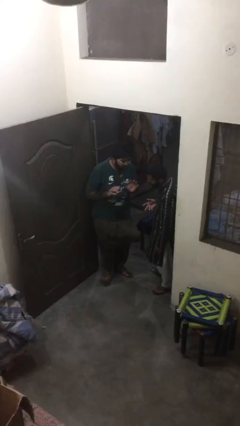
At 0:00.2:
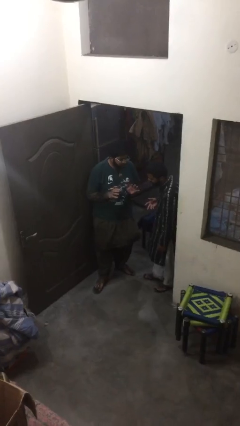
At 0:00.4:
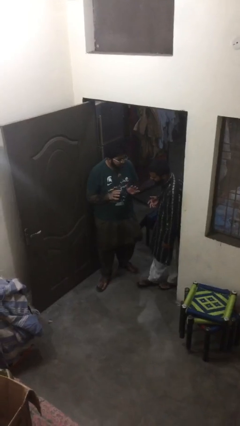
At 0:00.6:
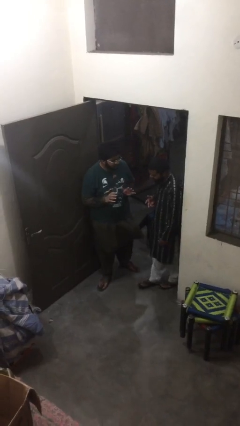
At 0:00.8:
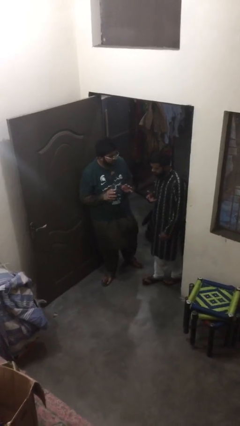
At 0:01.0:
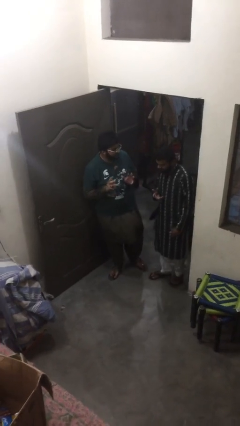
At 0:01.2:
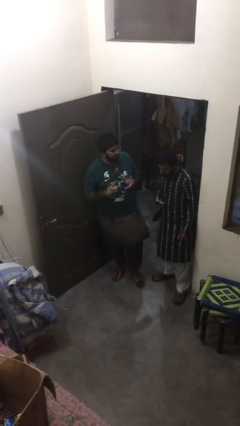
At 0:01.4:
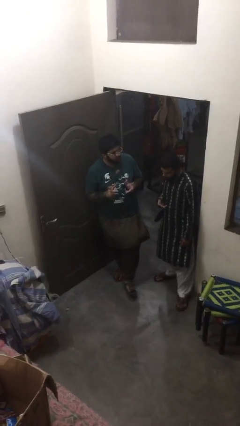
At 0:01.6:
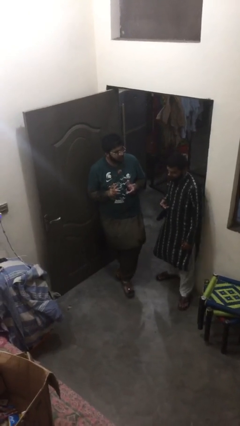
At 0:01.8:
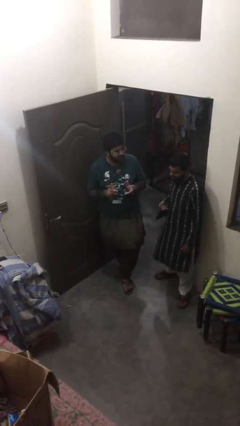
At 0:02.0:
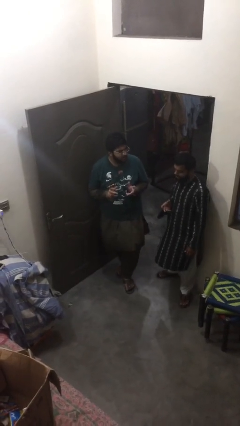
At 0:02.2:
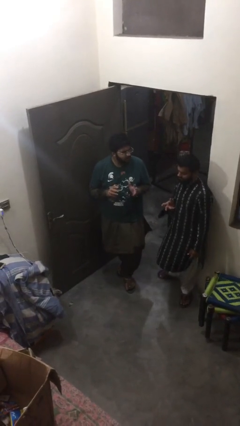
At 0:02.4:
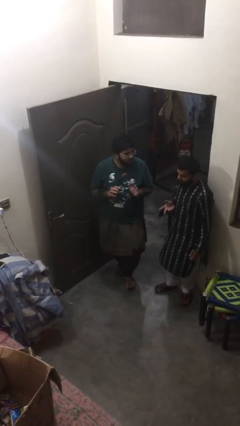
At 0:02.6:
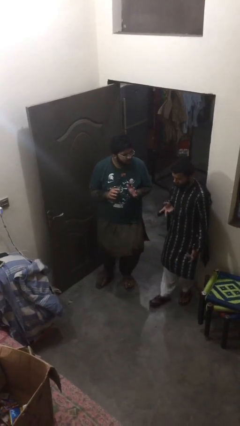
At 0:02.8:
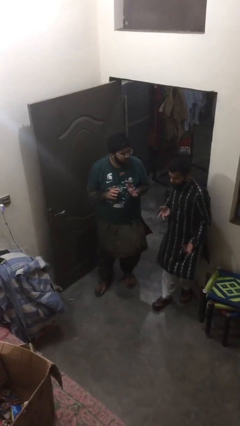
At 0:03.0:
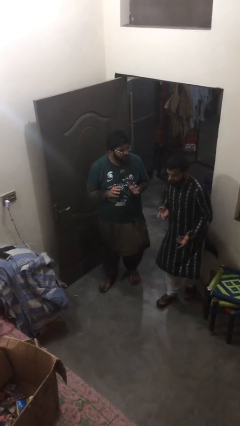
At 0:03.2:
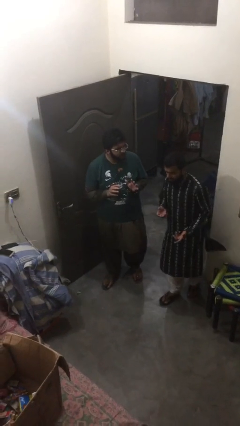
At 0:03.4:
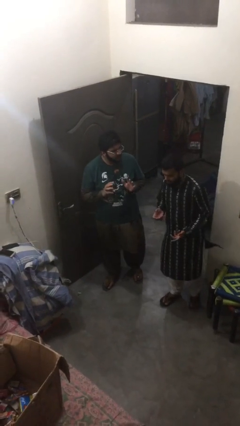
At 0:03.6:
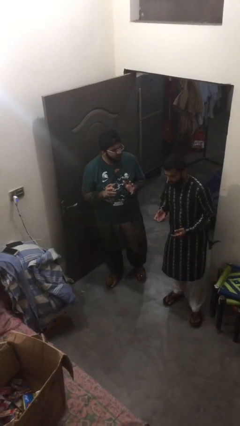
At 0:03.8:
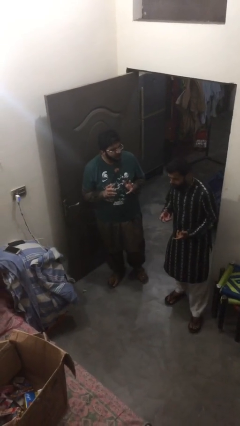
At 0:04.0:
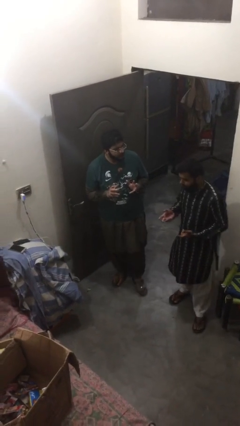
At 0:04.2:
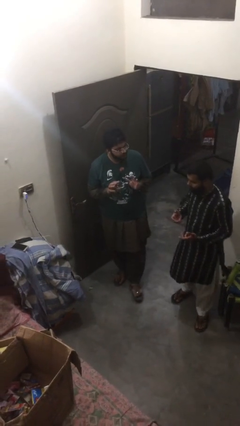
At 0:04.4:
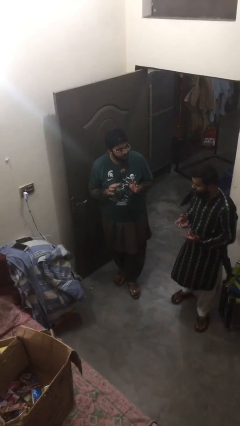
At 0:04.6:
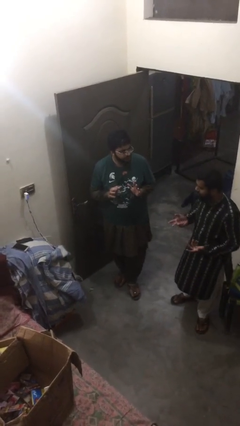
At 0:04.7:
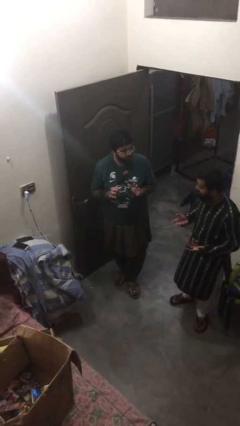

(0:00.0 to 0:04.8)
person talks to person

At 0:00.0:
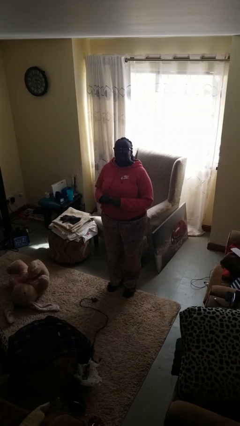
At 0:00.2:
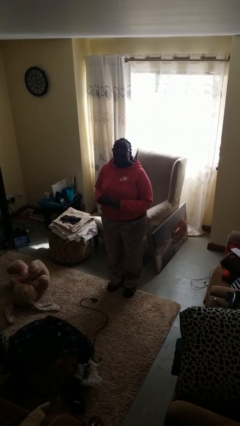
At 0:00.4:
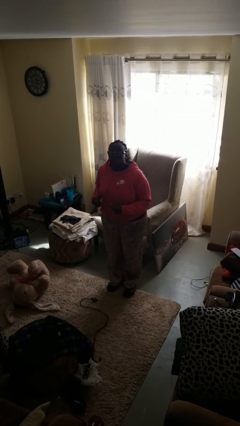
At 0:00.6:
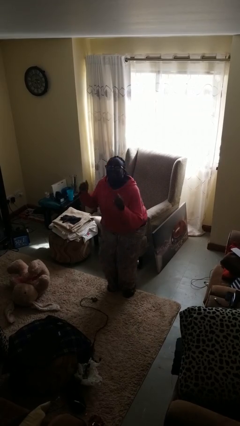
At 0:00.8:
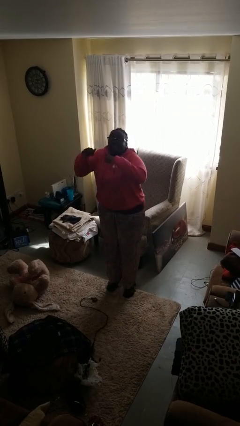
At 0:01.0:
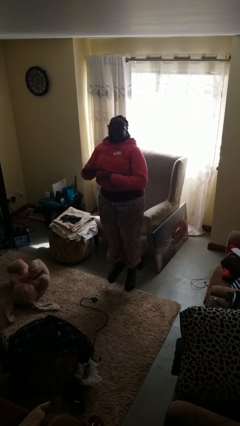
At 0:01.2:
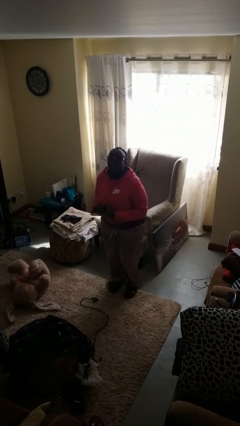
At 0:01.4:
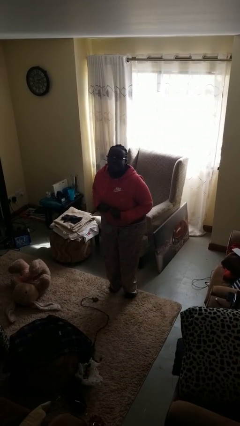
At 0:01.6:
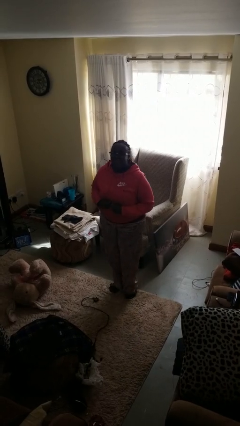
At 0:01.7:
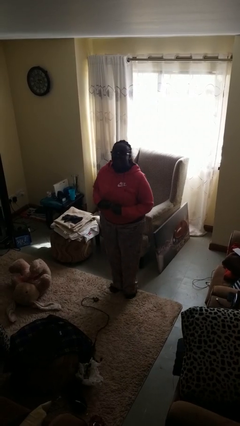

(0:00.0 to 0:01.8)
person jumps

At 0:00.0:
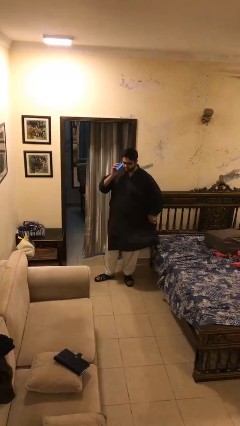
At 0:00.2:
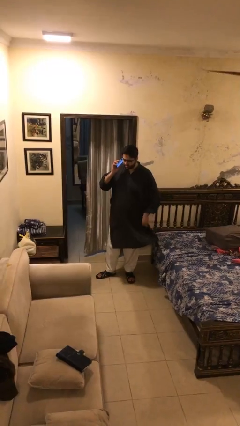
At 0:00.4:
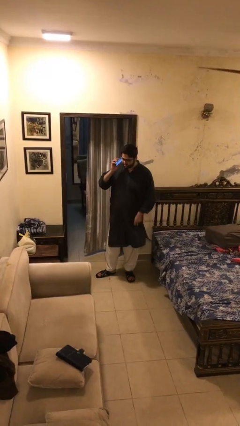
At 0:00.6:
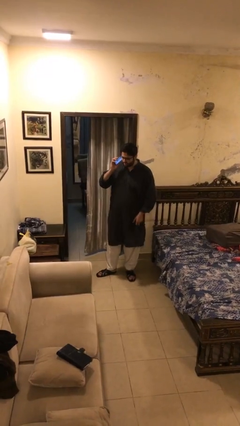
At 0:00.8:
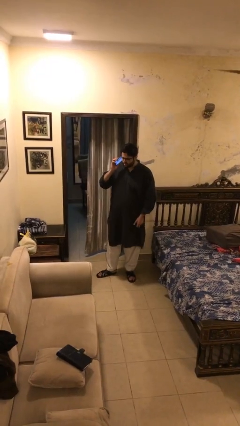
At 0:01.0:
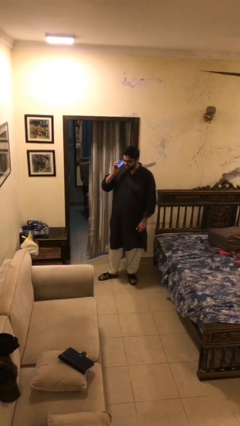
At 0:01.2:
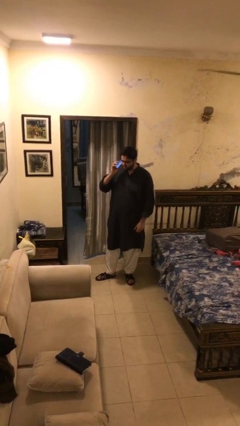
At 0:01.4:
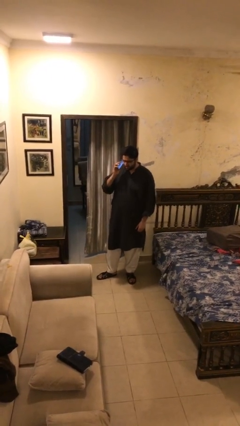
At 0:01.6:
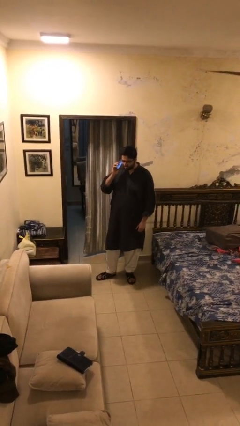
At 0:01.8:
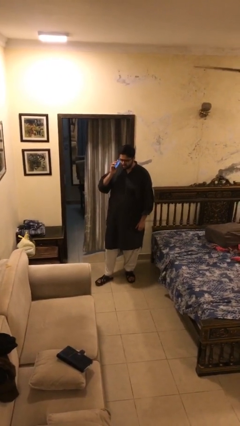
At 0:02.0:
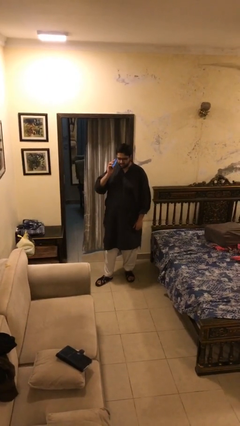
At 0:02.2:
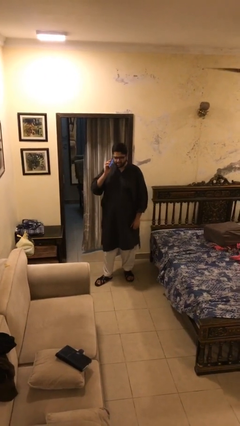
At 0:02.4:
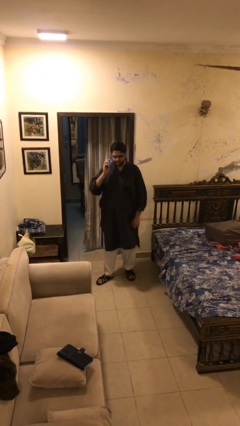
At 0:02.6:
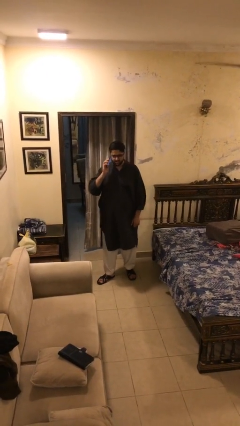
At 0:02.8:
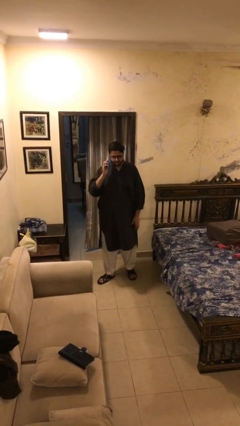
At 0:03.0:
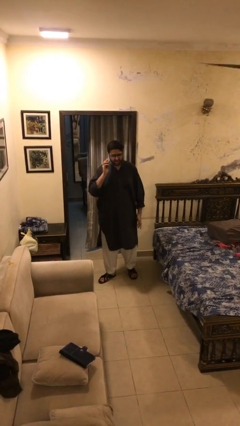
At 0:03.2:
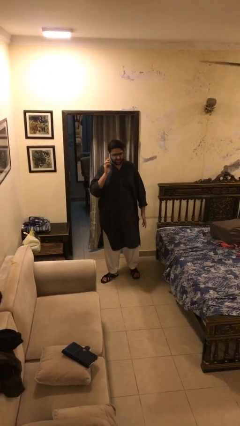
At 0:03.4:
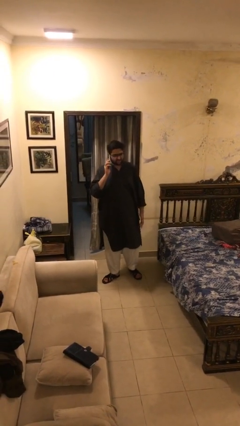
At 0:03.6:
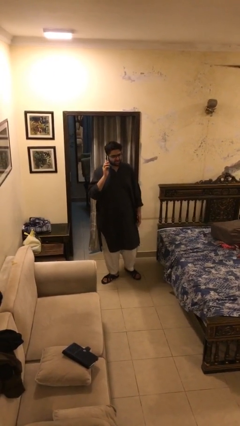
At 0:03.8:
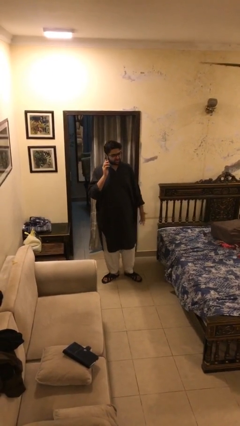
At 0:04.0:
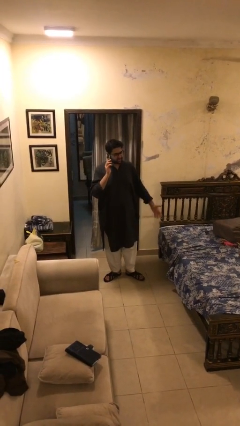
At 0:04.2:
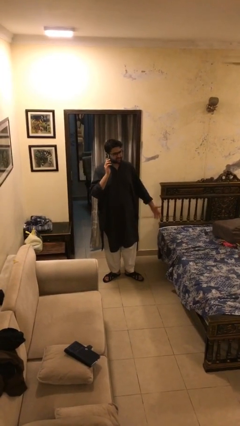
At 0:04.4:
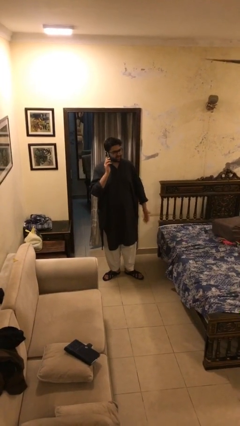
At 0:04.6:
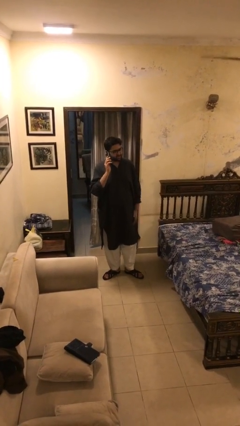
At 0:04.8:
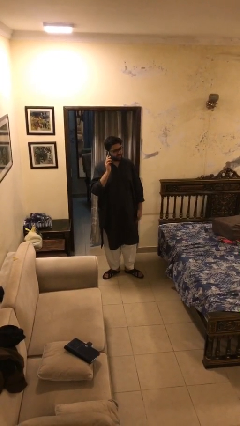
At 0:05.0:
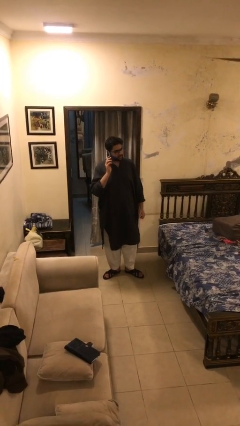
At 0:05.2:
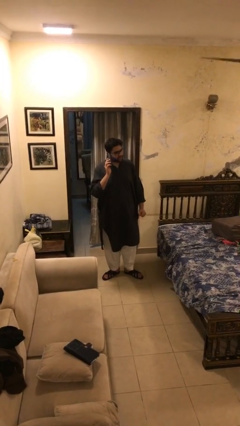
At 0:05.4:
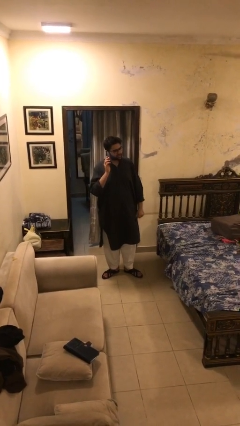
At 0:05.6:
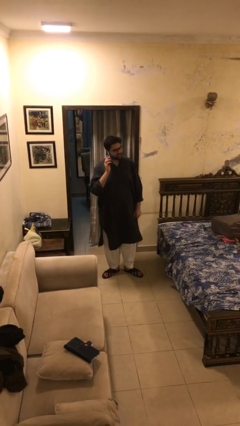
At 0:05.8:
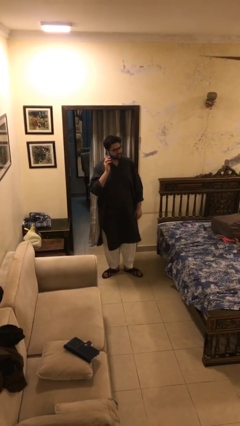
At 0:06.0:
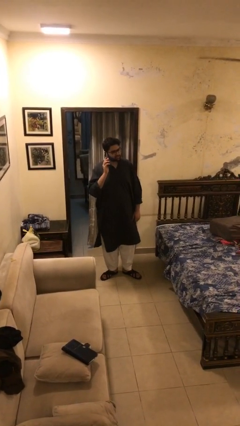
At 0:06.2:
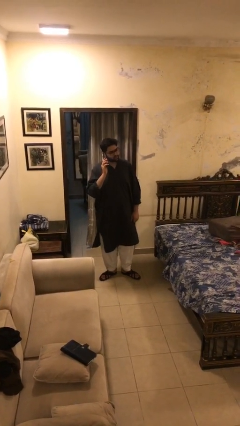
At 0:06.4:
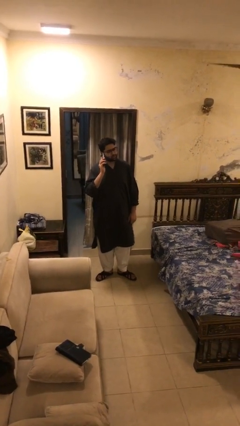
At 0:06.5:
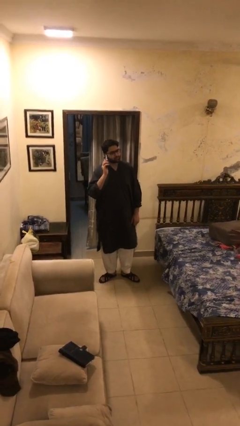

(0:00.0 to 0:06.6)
person talks on phone

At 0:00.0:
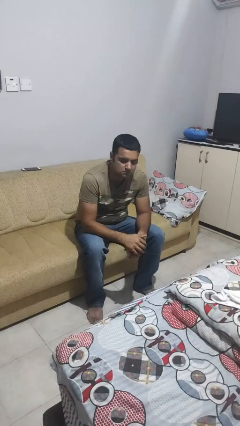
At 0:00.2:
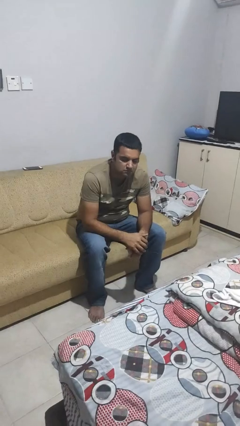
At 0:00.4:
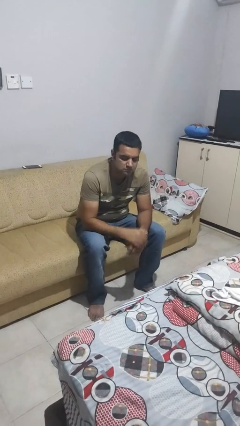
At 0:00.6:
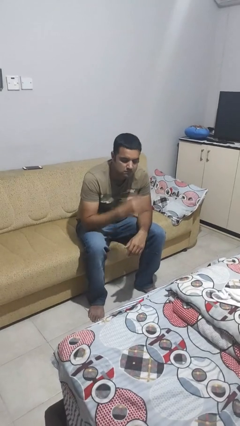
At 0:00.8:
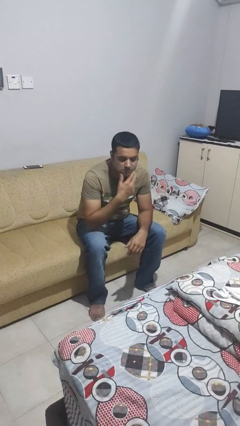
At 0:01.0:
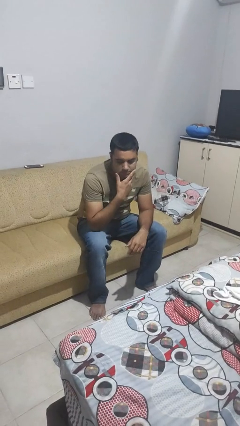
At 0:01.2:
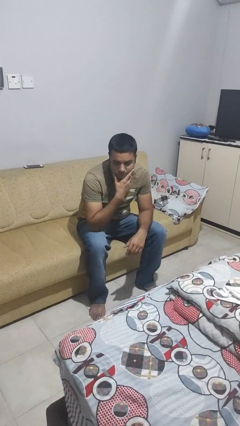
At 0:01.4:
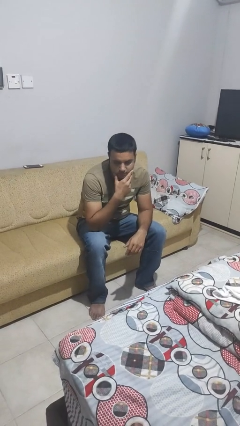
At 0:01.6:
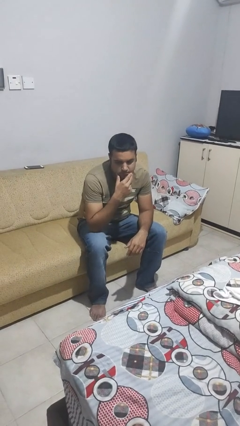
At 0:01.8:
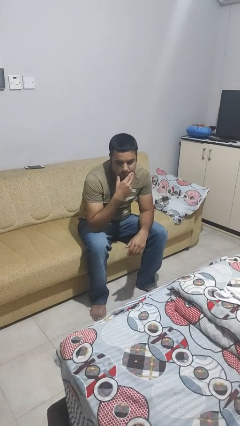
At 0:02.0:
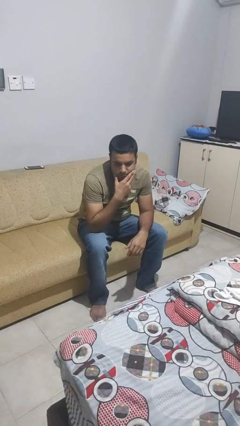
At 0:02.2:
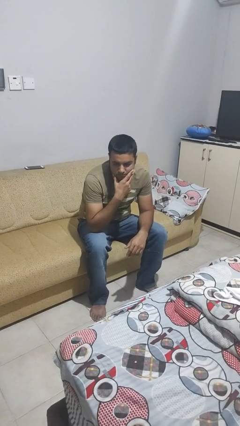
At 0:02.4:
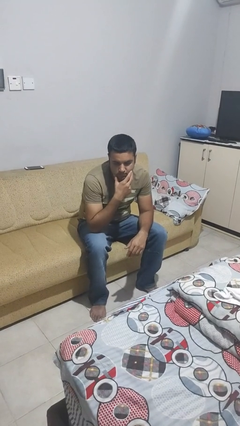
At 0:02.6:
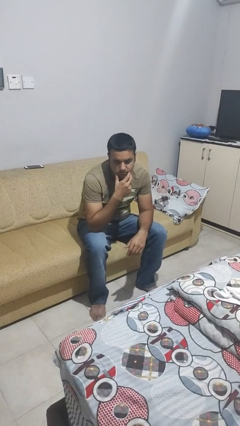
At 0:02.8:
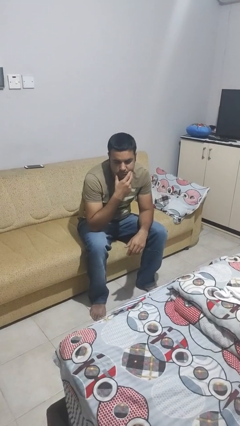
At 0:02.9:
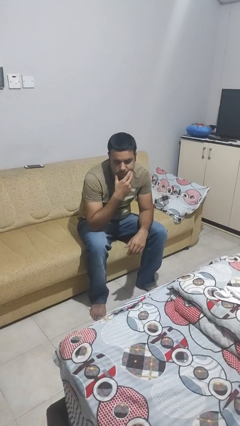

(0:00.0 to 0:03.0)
person strokes chin

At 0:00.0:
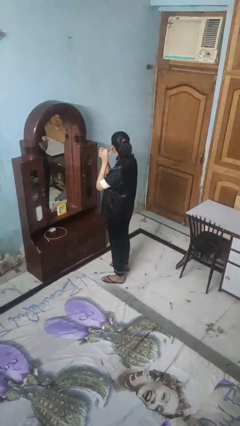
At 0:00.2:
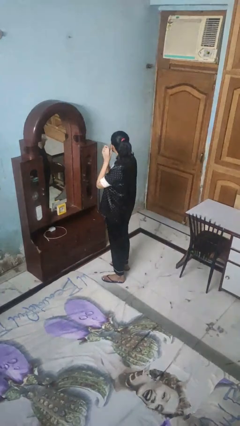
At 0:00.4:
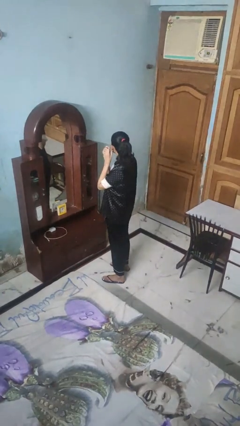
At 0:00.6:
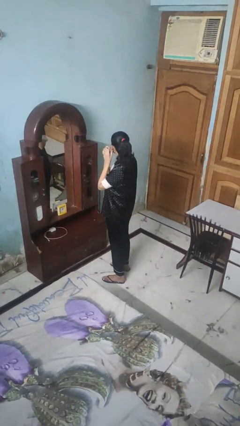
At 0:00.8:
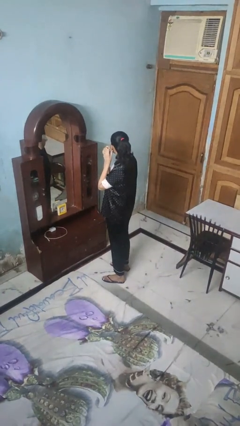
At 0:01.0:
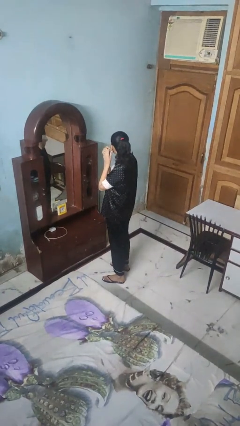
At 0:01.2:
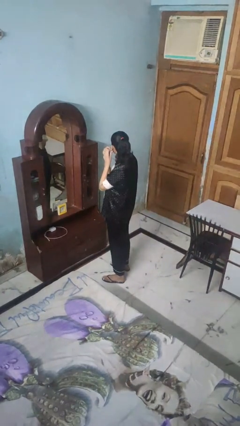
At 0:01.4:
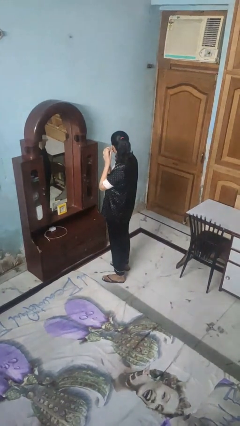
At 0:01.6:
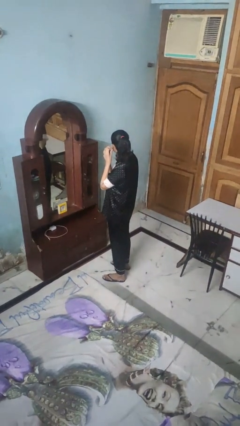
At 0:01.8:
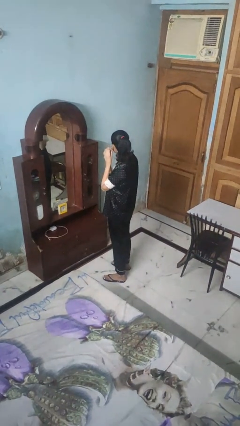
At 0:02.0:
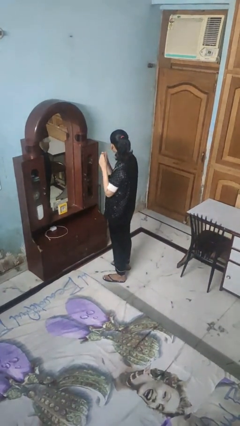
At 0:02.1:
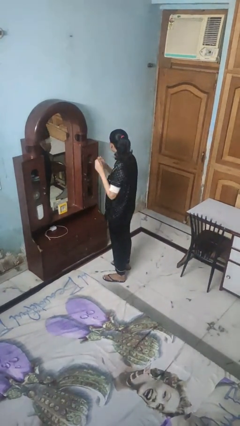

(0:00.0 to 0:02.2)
person puts on earrings
